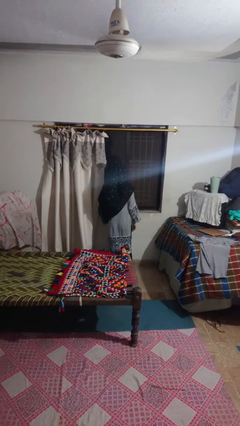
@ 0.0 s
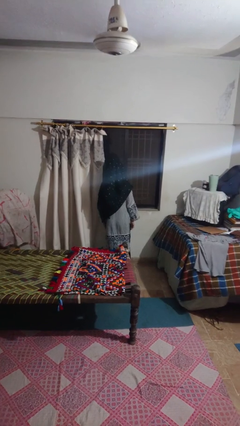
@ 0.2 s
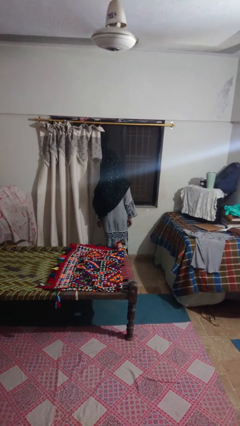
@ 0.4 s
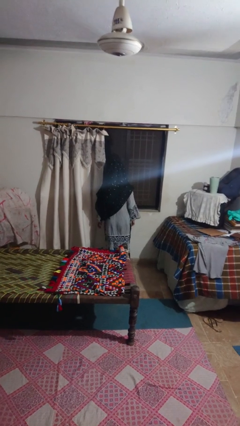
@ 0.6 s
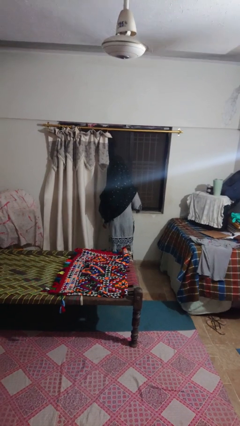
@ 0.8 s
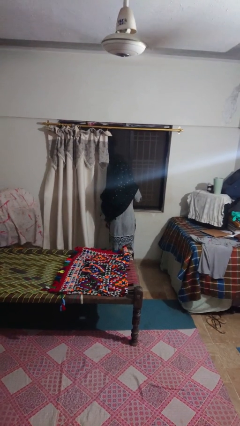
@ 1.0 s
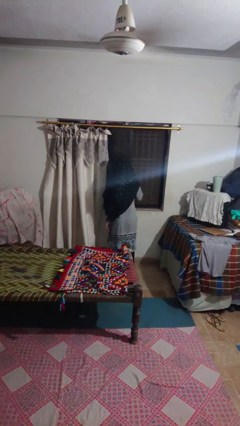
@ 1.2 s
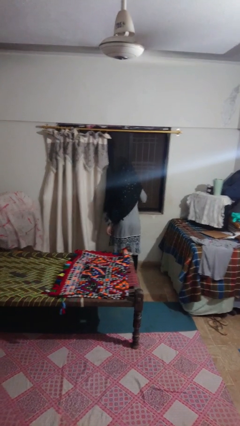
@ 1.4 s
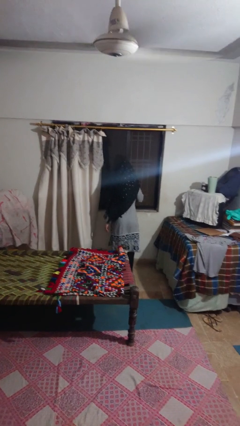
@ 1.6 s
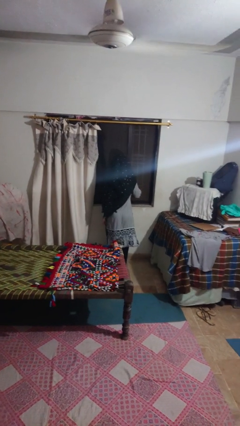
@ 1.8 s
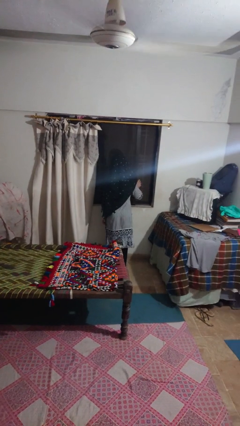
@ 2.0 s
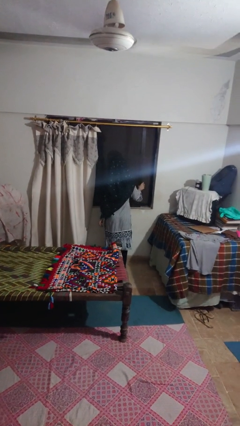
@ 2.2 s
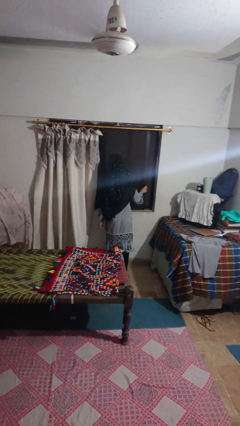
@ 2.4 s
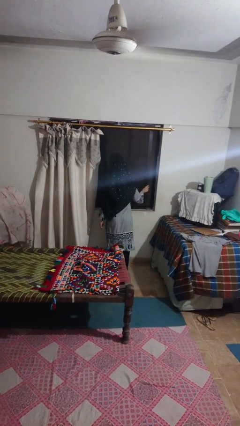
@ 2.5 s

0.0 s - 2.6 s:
person closes home window

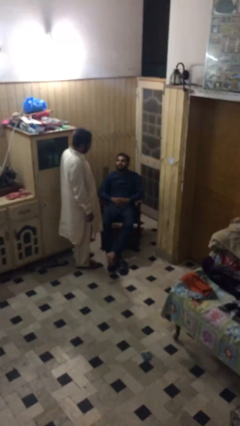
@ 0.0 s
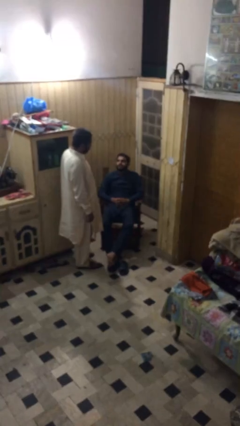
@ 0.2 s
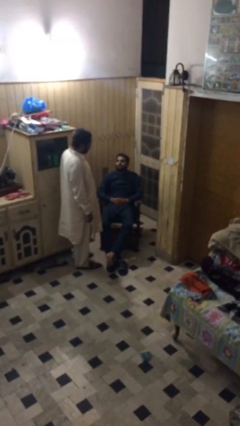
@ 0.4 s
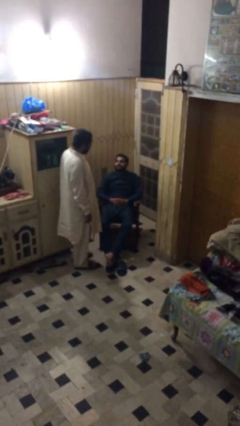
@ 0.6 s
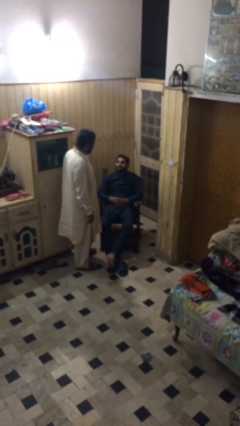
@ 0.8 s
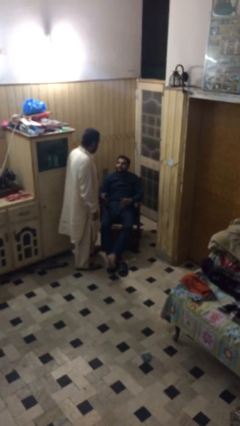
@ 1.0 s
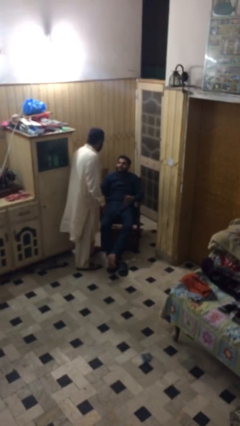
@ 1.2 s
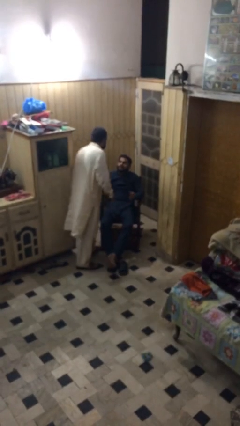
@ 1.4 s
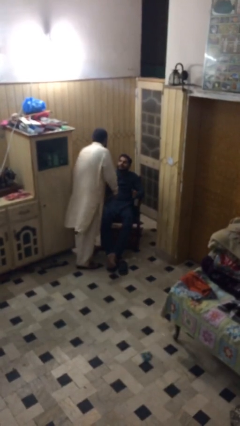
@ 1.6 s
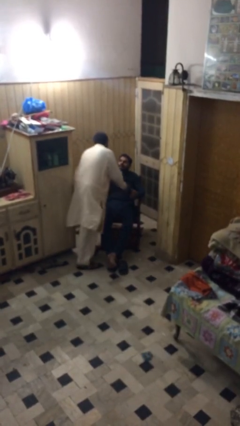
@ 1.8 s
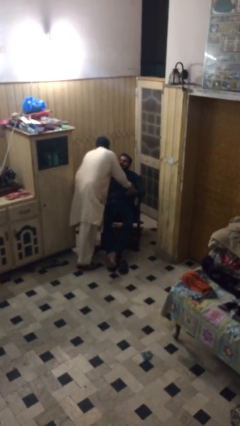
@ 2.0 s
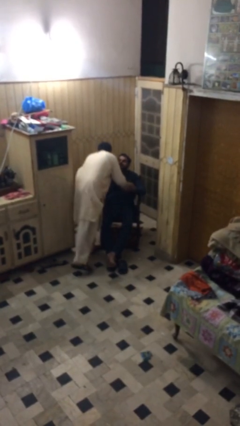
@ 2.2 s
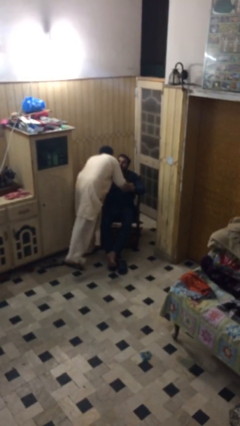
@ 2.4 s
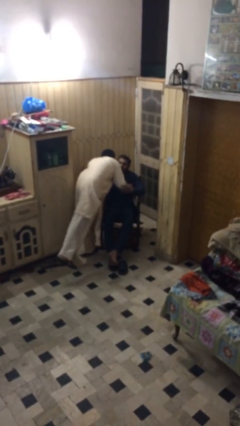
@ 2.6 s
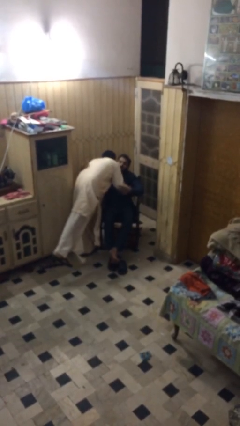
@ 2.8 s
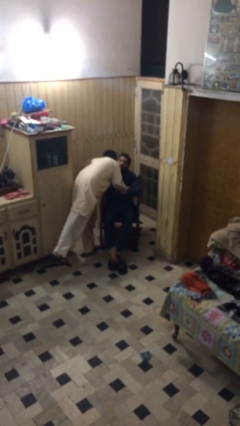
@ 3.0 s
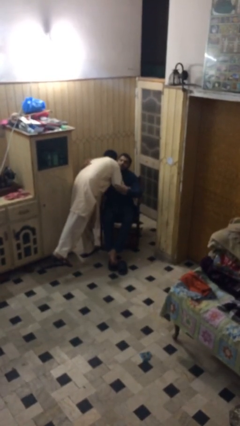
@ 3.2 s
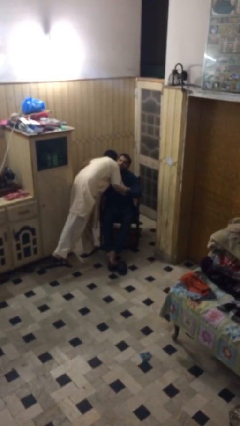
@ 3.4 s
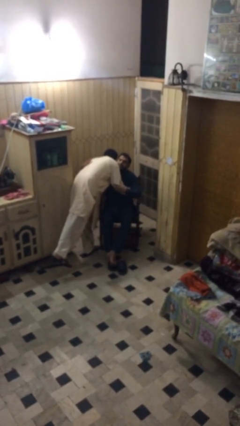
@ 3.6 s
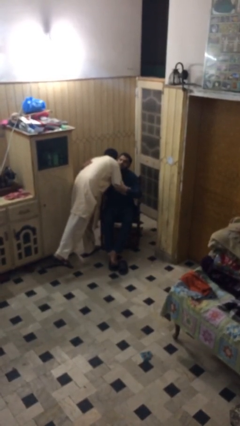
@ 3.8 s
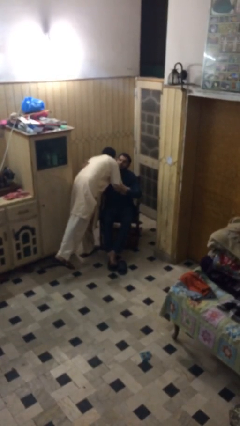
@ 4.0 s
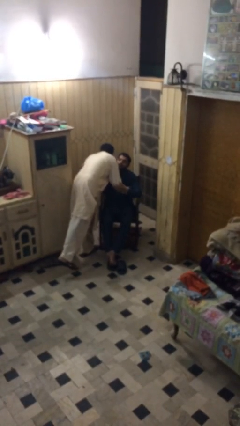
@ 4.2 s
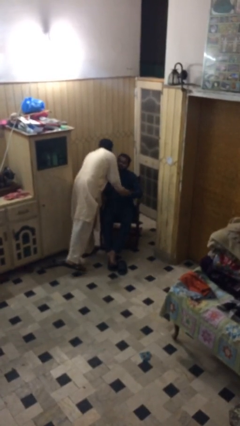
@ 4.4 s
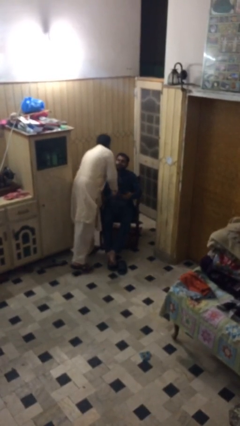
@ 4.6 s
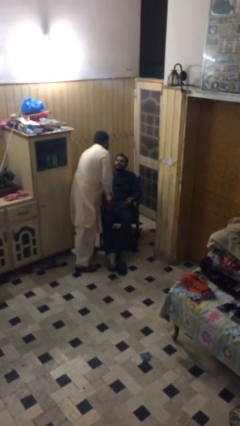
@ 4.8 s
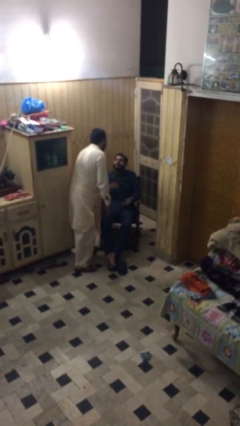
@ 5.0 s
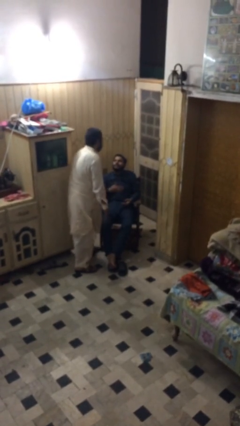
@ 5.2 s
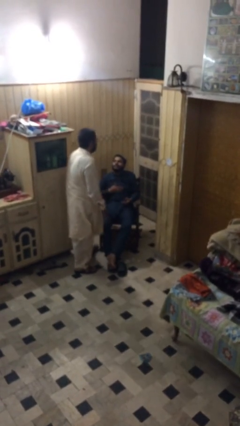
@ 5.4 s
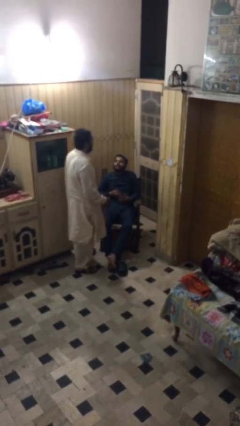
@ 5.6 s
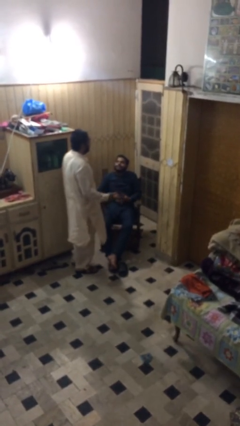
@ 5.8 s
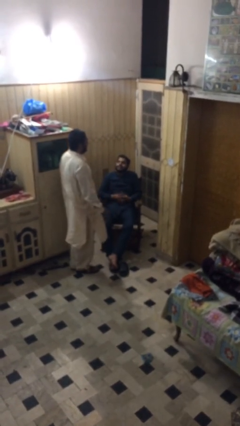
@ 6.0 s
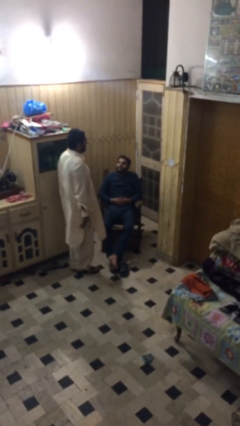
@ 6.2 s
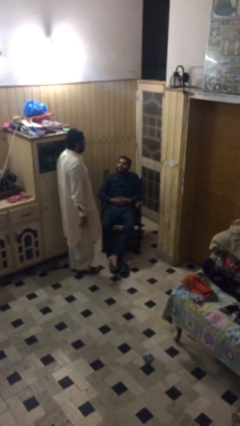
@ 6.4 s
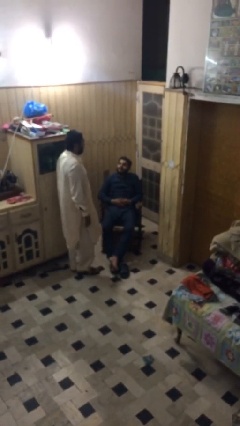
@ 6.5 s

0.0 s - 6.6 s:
person embraces person

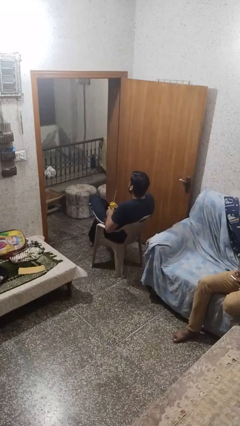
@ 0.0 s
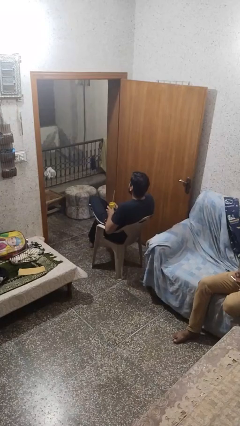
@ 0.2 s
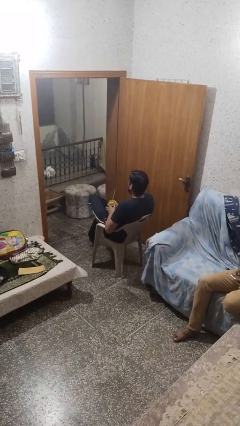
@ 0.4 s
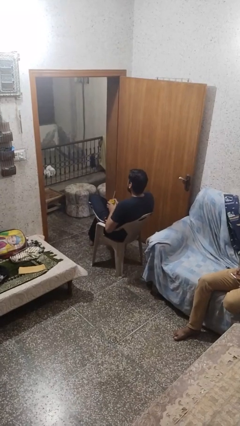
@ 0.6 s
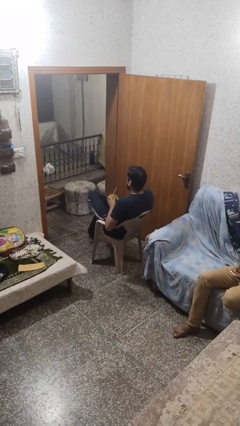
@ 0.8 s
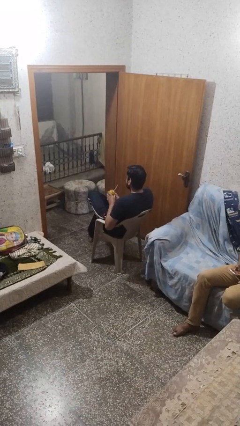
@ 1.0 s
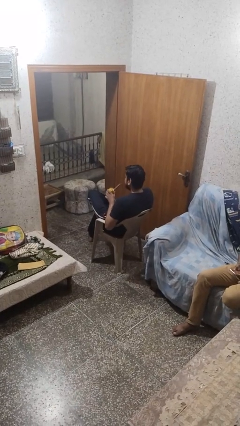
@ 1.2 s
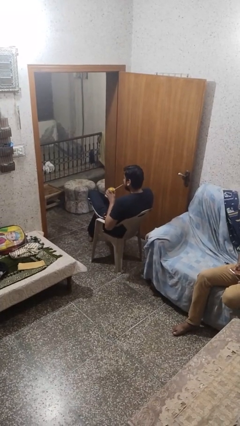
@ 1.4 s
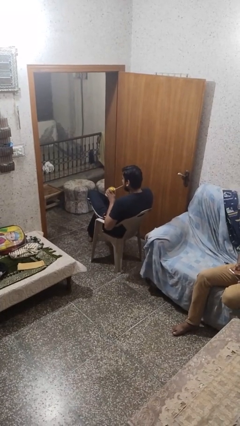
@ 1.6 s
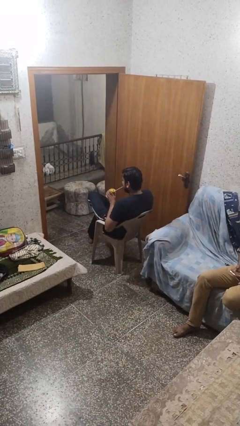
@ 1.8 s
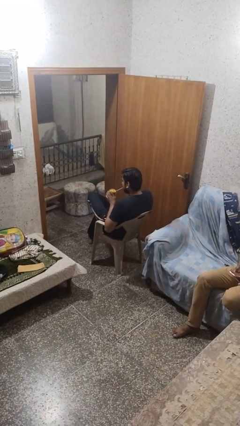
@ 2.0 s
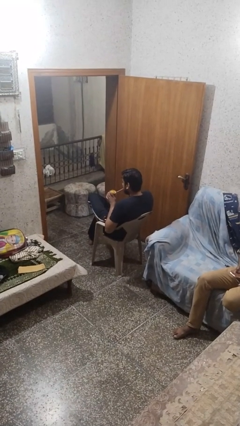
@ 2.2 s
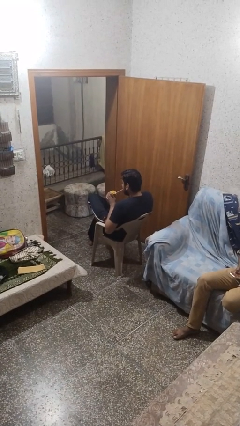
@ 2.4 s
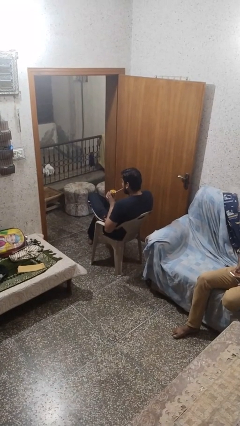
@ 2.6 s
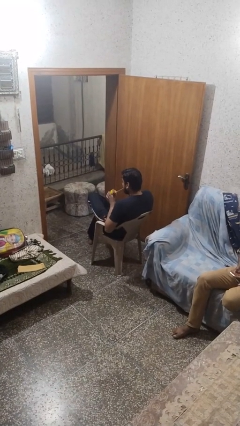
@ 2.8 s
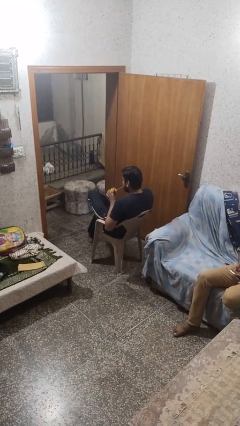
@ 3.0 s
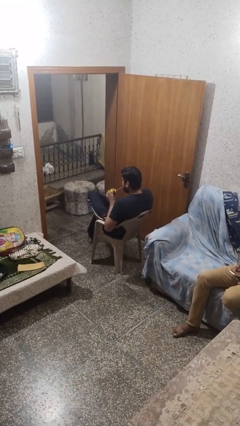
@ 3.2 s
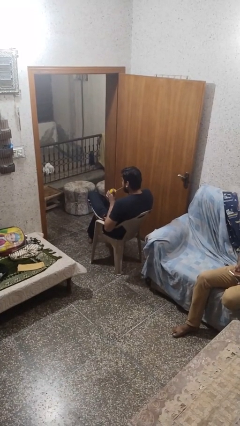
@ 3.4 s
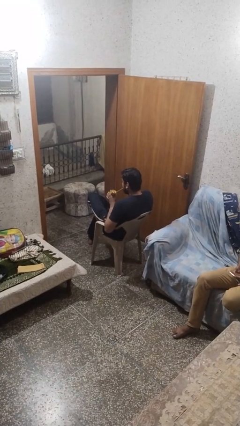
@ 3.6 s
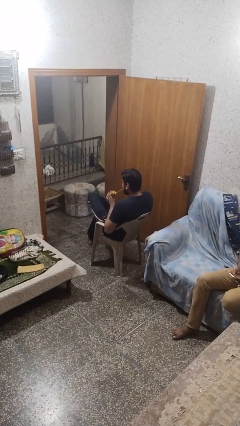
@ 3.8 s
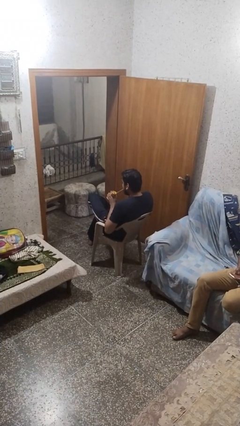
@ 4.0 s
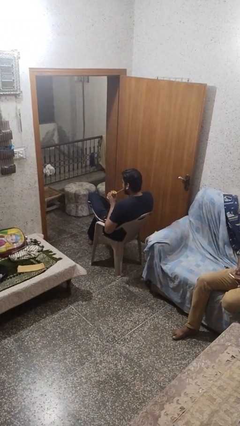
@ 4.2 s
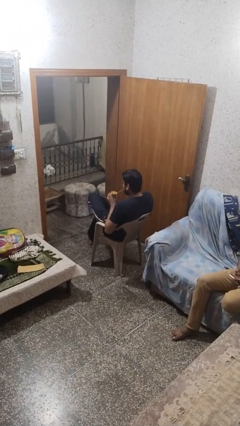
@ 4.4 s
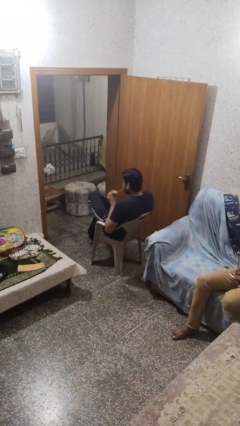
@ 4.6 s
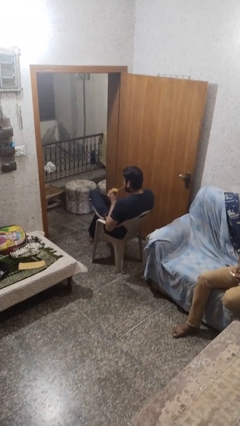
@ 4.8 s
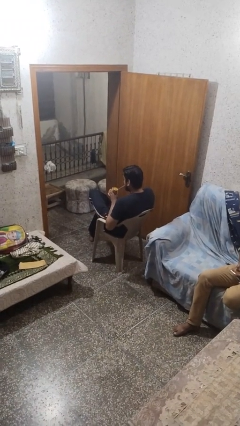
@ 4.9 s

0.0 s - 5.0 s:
person drinks from straw

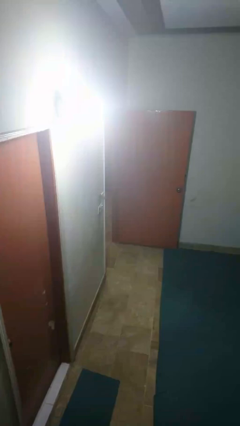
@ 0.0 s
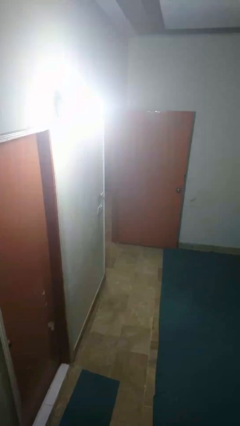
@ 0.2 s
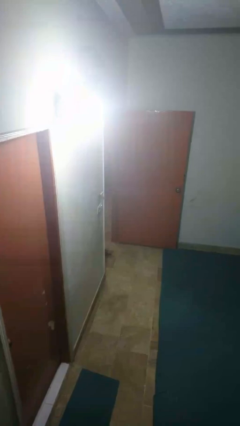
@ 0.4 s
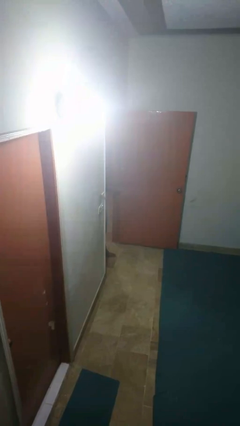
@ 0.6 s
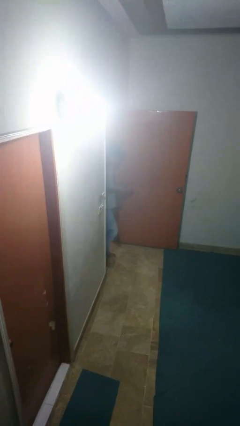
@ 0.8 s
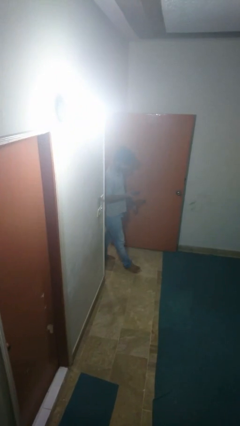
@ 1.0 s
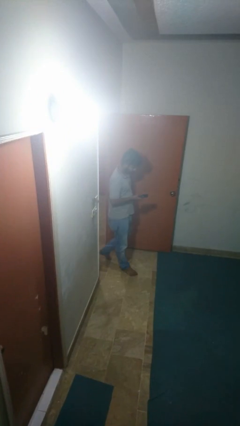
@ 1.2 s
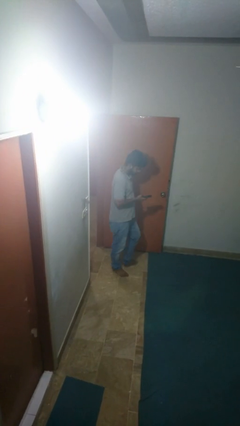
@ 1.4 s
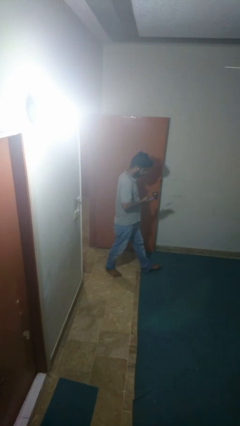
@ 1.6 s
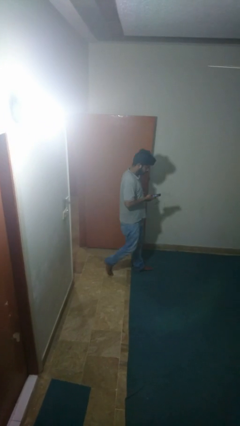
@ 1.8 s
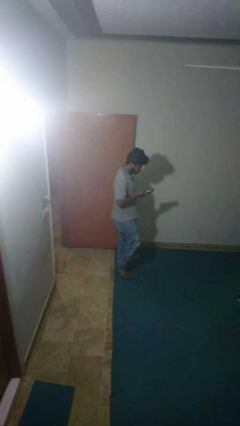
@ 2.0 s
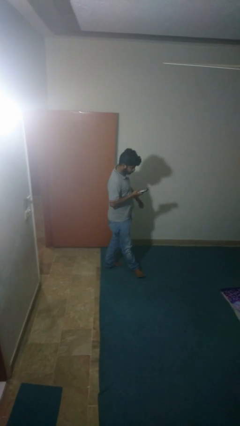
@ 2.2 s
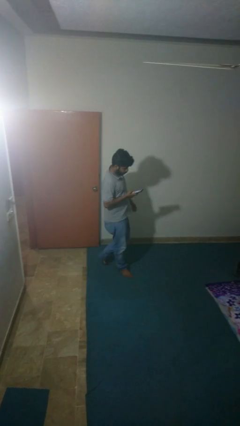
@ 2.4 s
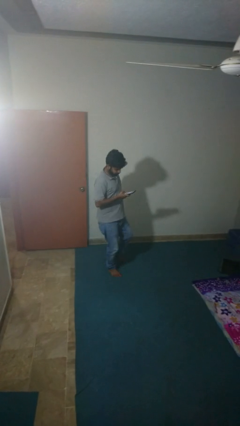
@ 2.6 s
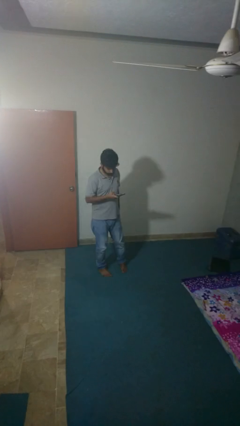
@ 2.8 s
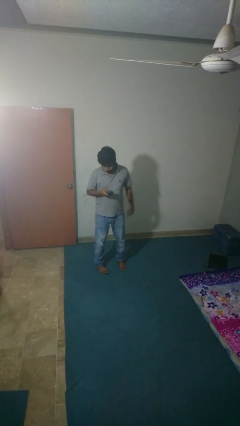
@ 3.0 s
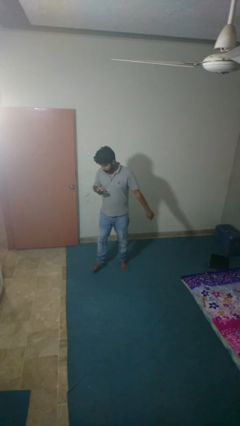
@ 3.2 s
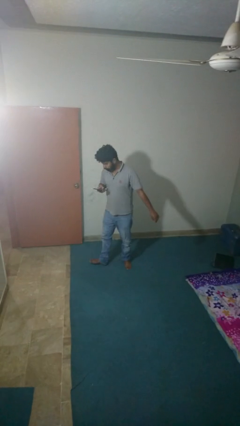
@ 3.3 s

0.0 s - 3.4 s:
person enters scene through structure
